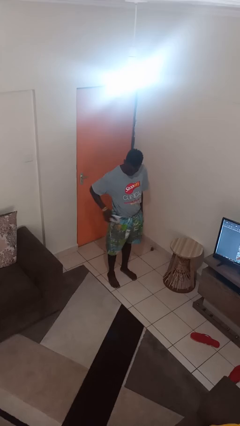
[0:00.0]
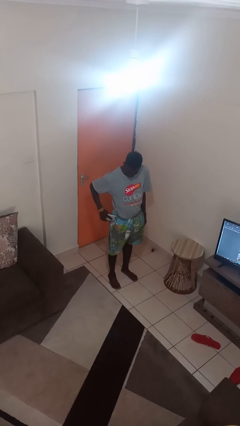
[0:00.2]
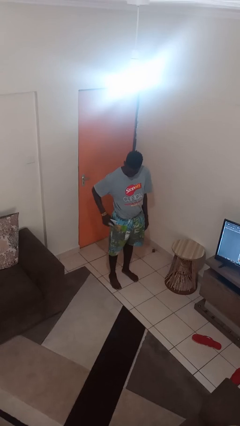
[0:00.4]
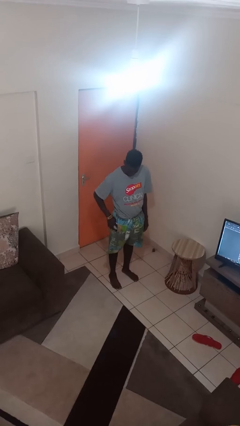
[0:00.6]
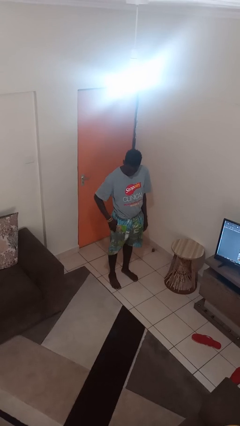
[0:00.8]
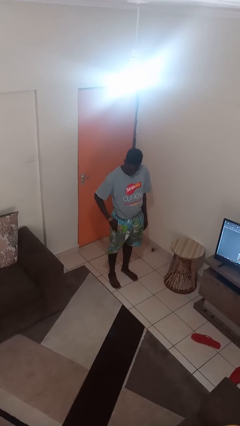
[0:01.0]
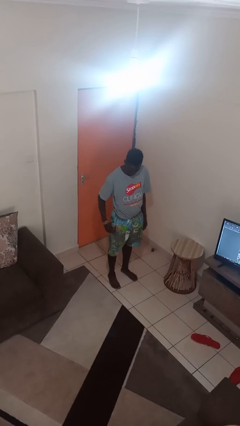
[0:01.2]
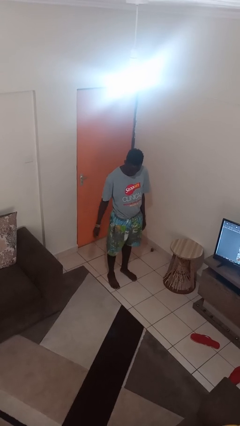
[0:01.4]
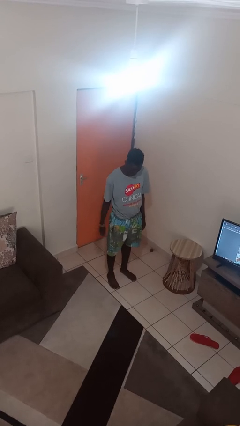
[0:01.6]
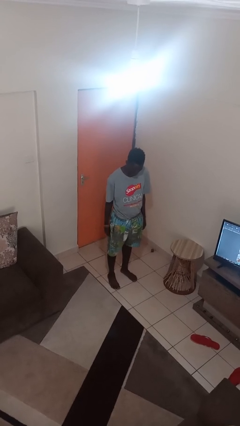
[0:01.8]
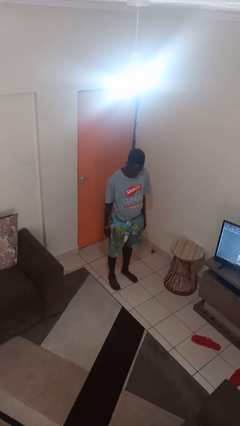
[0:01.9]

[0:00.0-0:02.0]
person puts phone into pocket

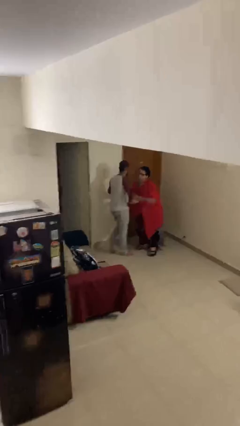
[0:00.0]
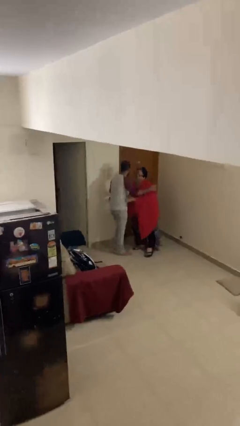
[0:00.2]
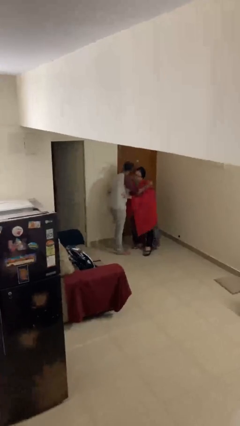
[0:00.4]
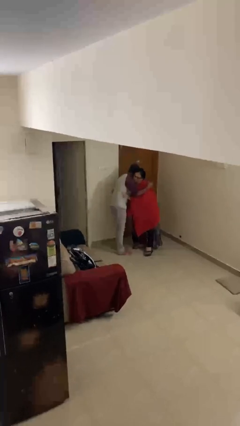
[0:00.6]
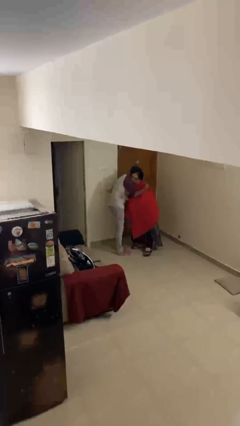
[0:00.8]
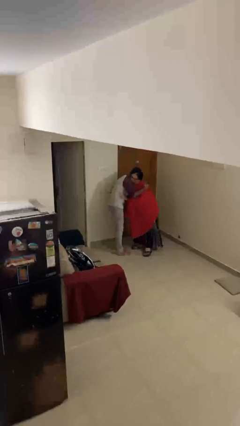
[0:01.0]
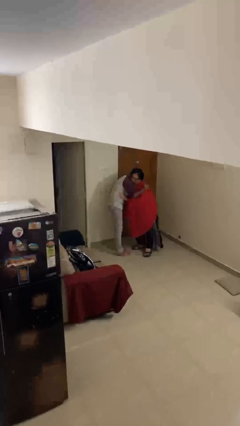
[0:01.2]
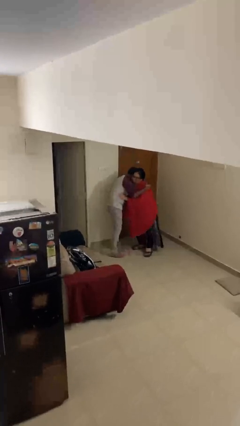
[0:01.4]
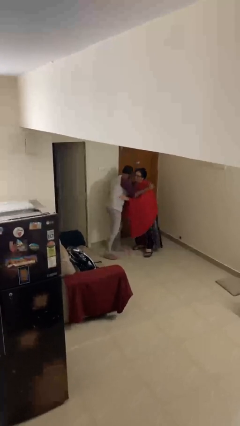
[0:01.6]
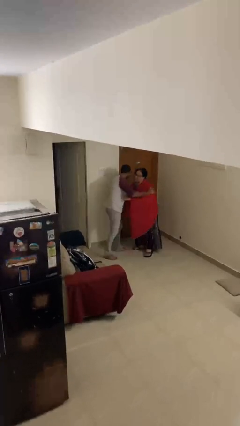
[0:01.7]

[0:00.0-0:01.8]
person embraces person

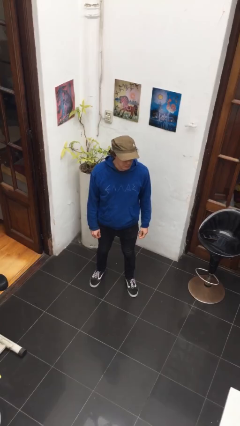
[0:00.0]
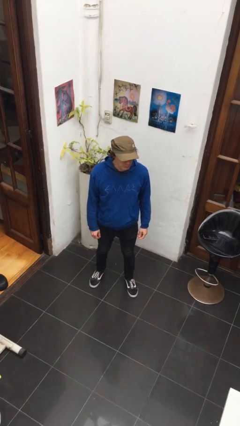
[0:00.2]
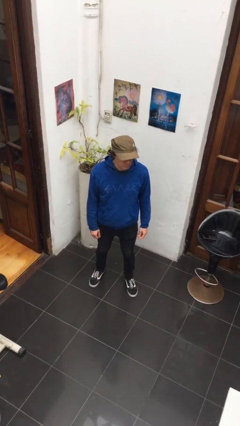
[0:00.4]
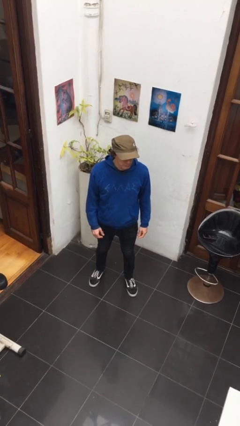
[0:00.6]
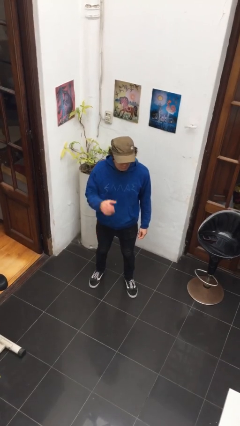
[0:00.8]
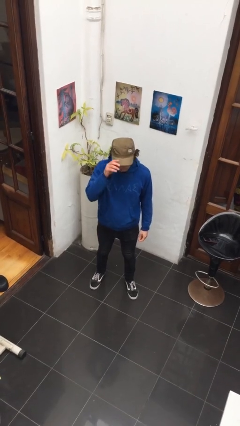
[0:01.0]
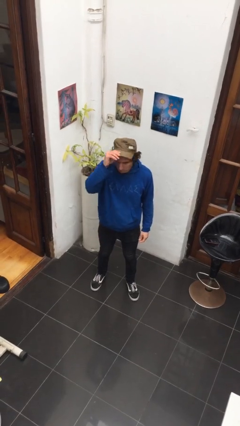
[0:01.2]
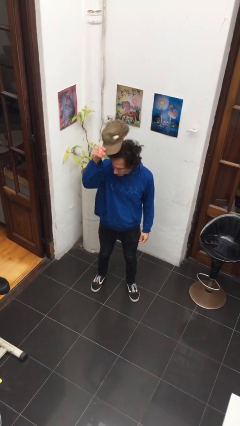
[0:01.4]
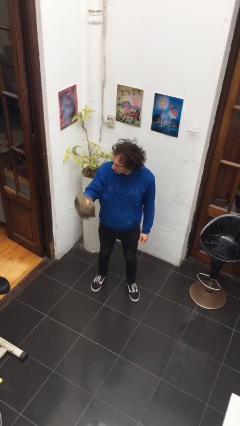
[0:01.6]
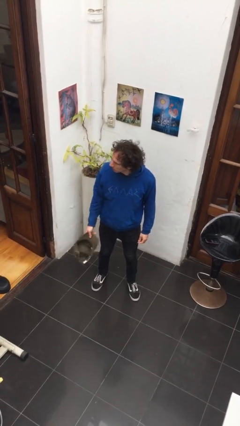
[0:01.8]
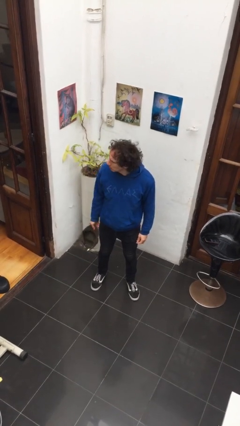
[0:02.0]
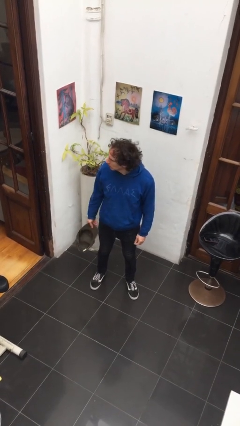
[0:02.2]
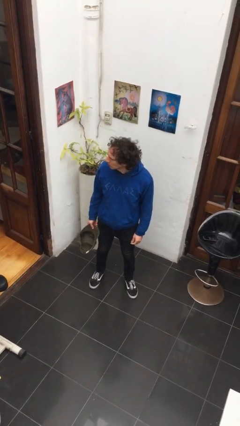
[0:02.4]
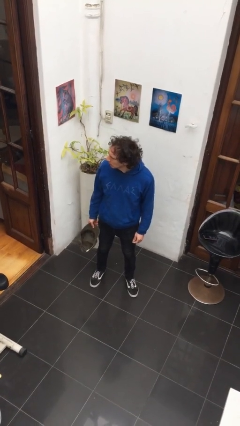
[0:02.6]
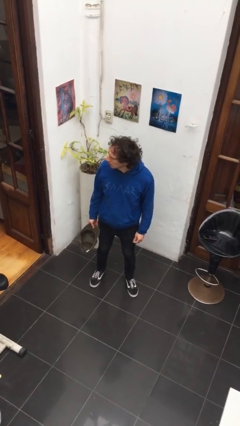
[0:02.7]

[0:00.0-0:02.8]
person takes off hat

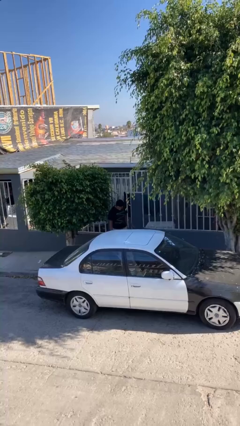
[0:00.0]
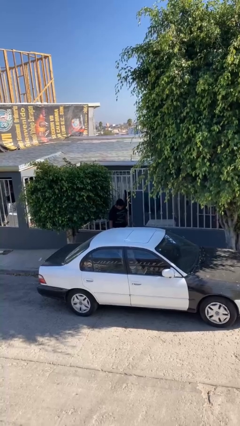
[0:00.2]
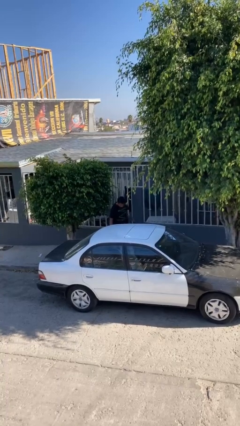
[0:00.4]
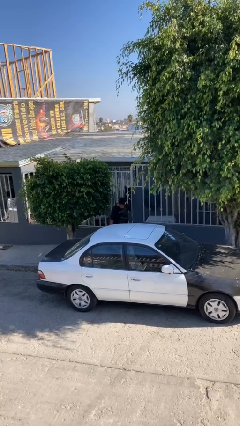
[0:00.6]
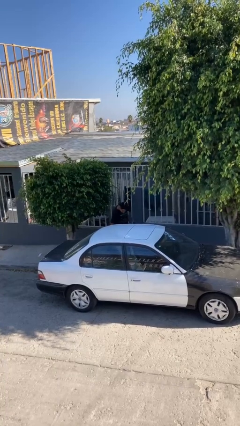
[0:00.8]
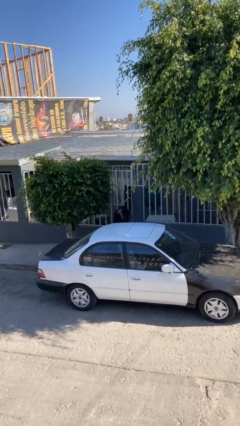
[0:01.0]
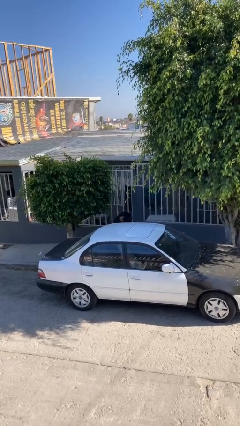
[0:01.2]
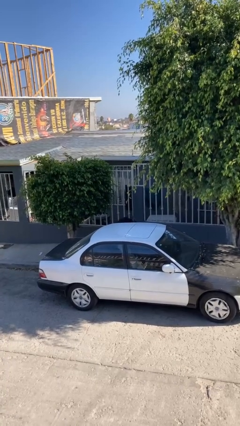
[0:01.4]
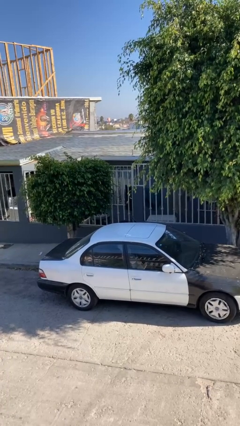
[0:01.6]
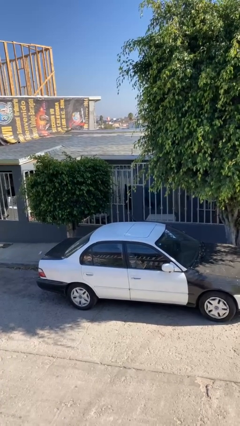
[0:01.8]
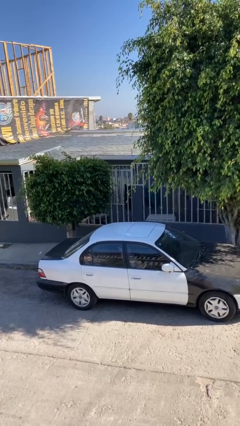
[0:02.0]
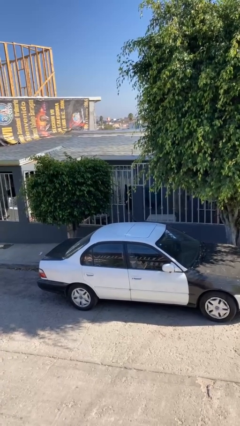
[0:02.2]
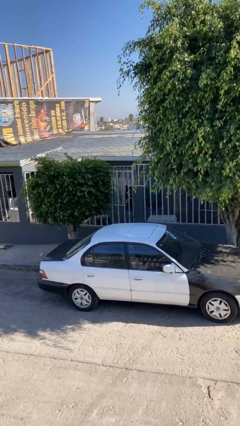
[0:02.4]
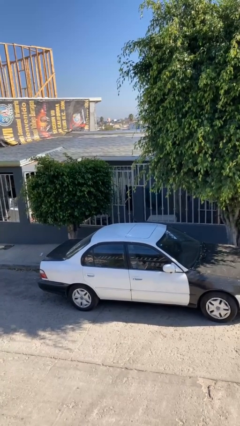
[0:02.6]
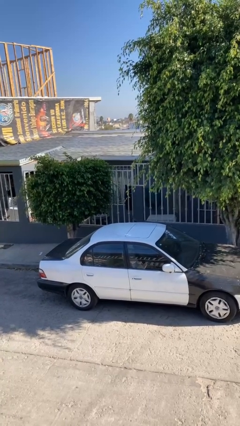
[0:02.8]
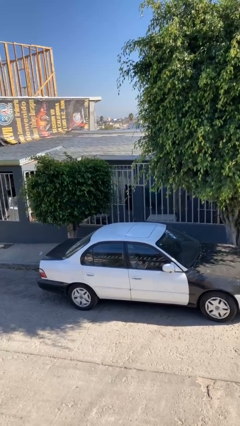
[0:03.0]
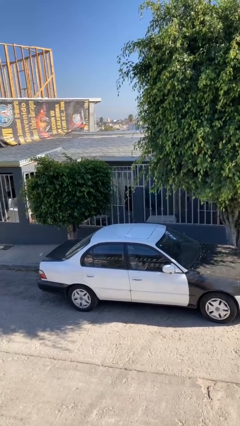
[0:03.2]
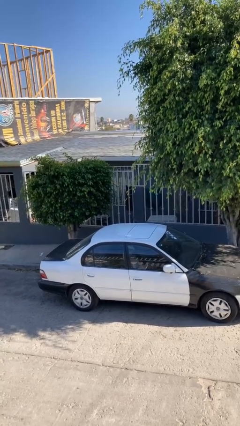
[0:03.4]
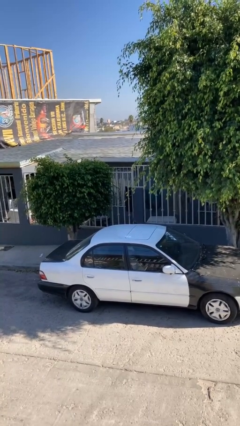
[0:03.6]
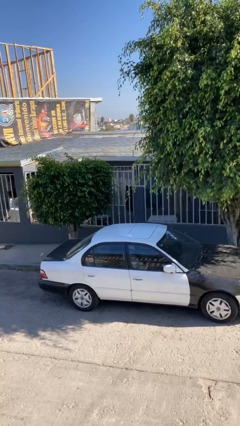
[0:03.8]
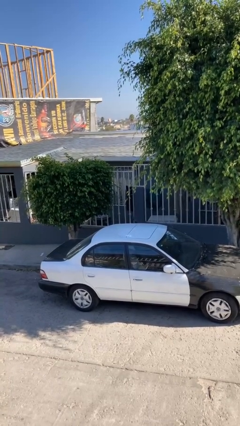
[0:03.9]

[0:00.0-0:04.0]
person enters car

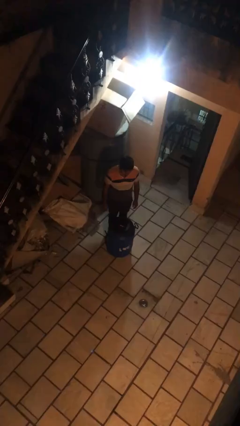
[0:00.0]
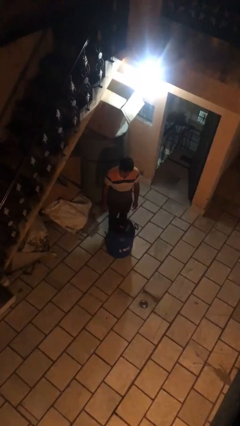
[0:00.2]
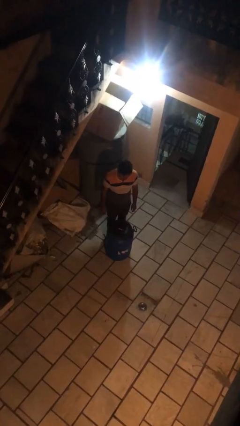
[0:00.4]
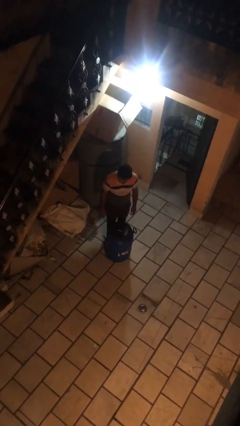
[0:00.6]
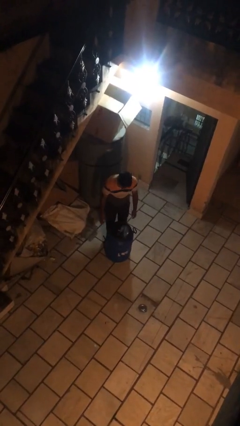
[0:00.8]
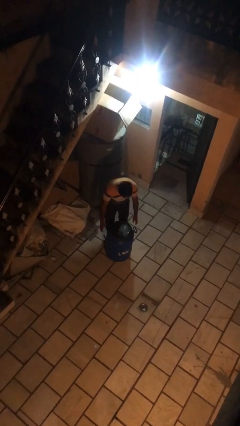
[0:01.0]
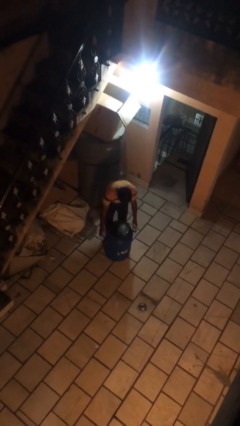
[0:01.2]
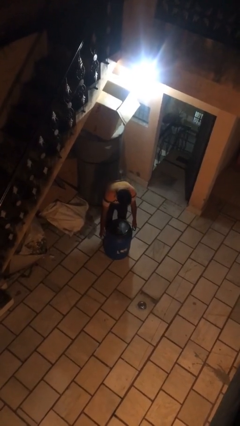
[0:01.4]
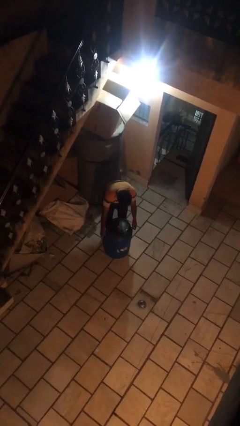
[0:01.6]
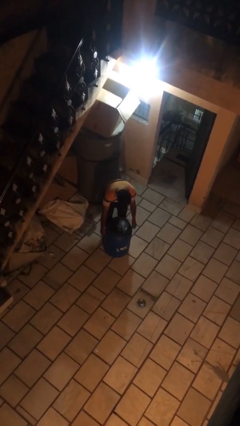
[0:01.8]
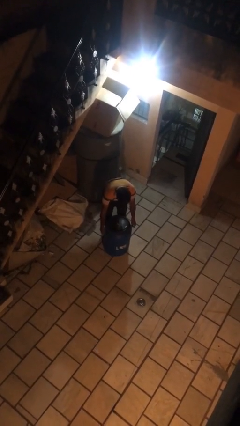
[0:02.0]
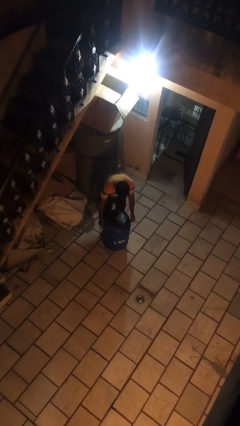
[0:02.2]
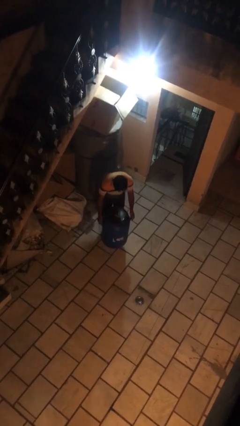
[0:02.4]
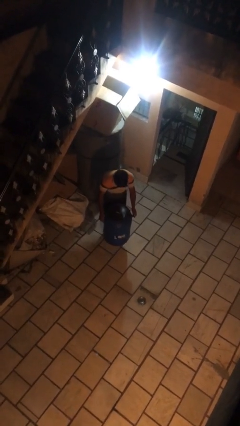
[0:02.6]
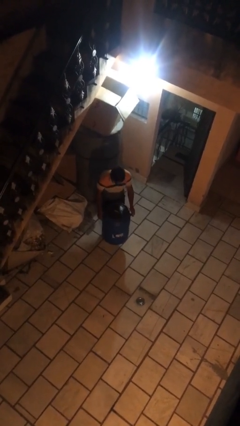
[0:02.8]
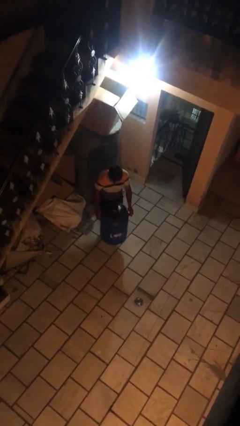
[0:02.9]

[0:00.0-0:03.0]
person picks up object from floor

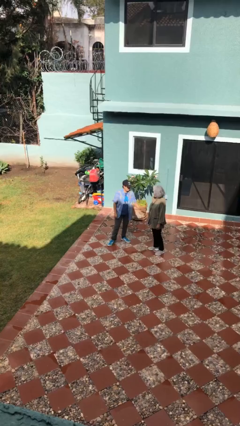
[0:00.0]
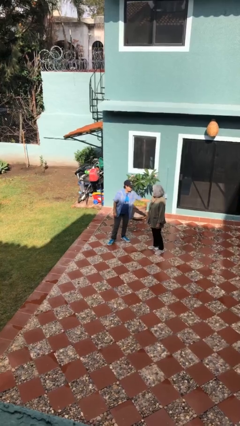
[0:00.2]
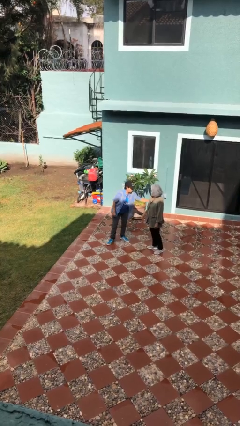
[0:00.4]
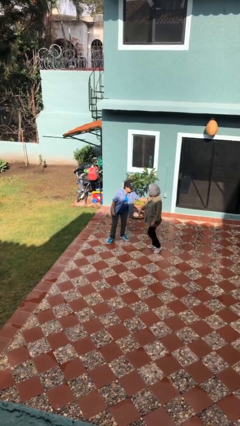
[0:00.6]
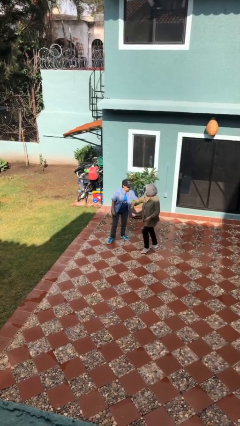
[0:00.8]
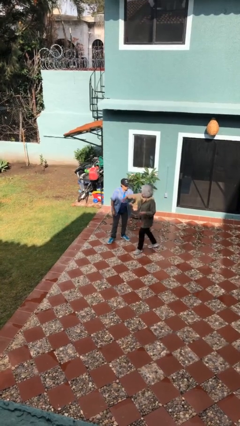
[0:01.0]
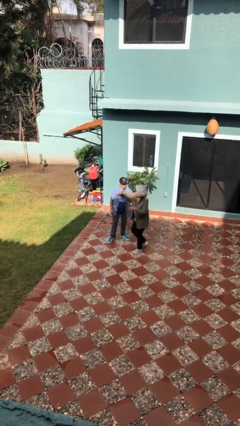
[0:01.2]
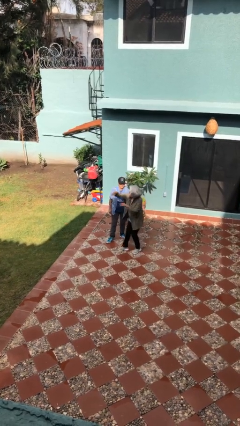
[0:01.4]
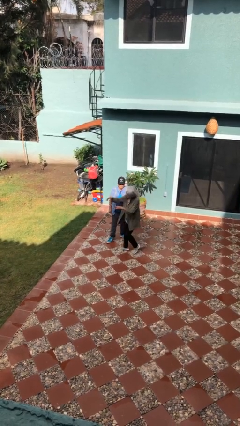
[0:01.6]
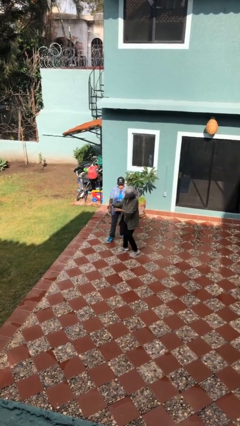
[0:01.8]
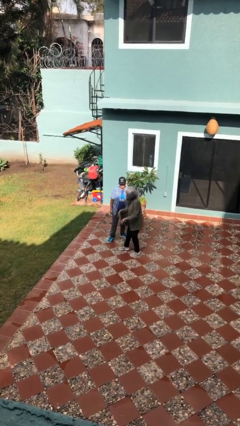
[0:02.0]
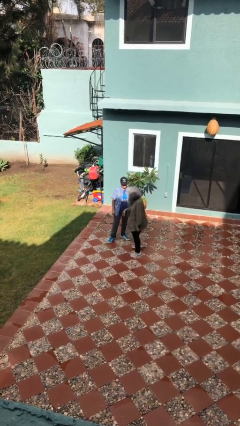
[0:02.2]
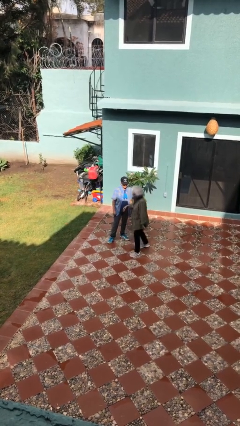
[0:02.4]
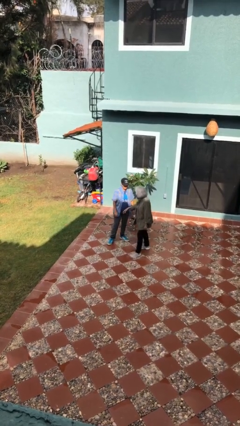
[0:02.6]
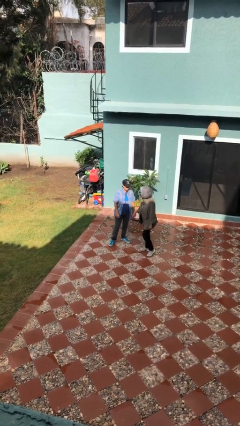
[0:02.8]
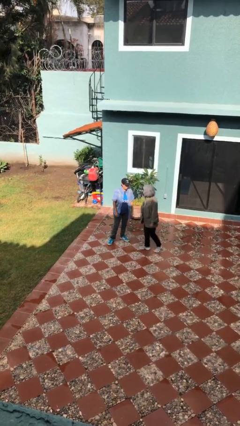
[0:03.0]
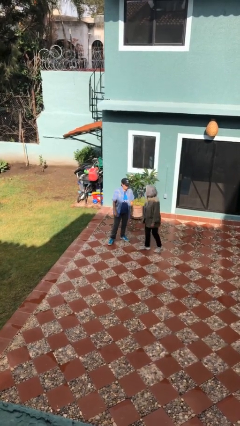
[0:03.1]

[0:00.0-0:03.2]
person grabs person by bicep

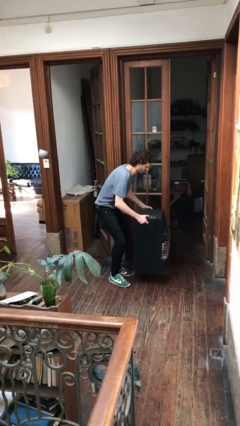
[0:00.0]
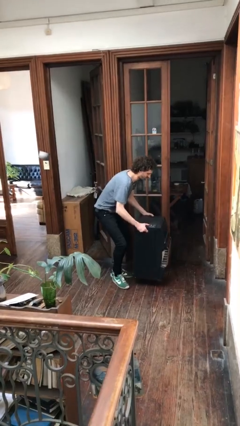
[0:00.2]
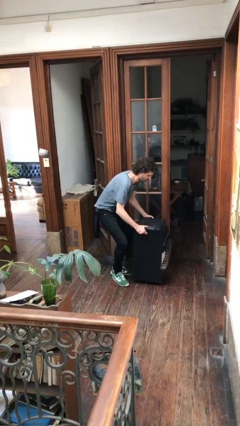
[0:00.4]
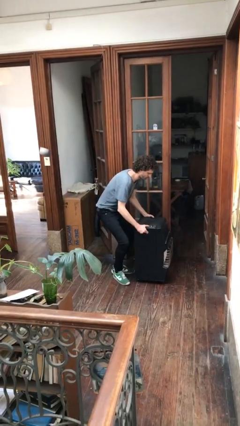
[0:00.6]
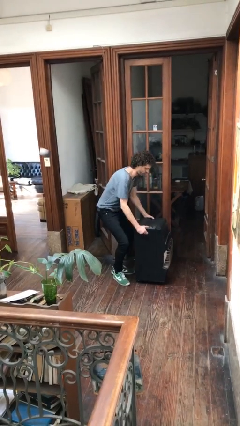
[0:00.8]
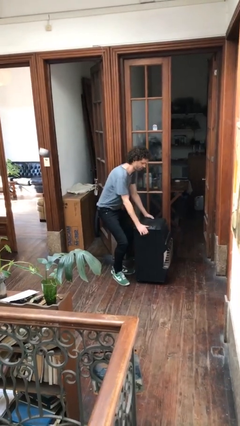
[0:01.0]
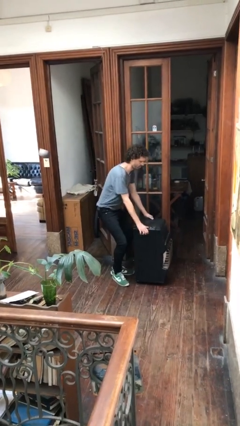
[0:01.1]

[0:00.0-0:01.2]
person puts down object on floor
